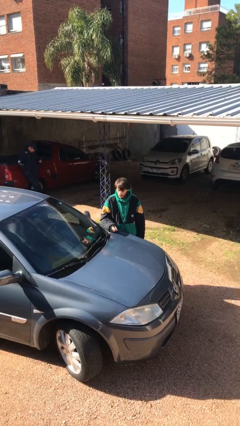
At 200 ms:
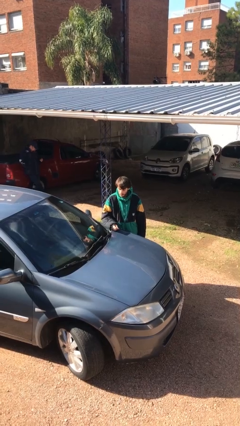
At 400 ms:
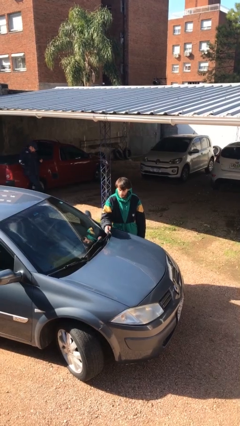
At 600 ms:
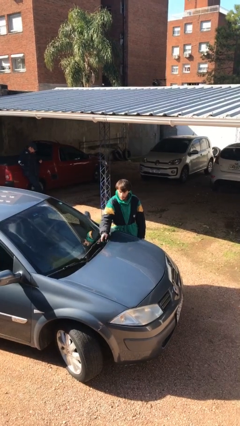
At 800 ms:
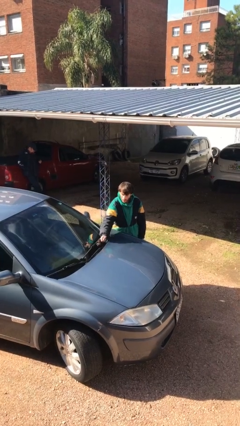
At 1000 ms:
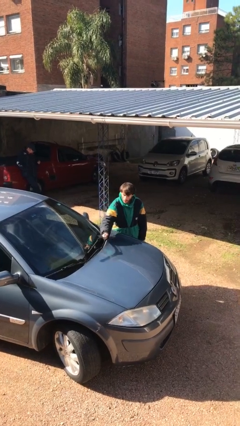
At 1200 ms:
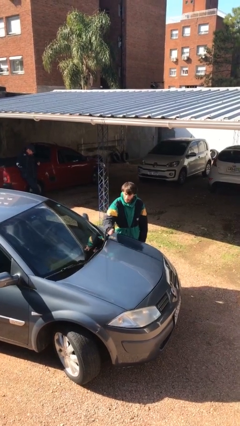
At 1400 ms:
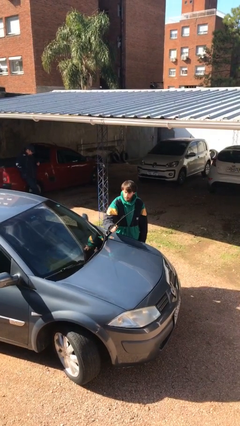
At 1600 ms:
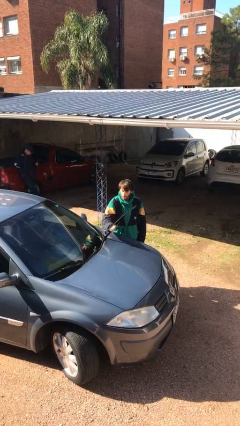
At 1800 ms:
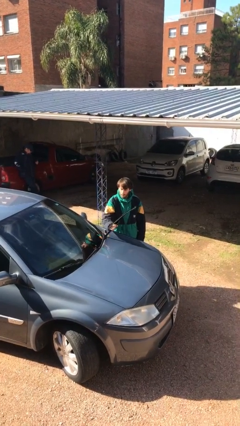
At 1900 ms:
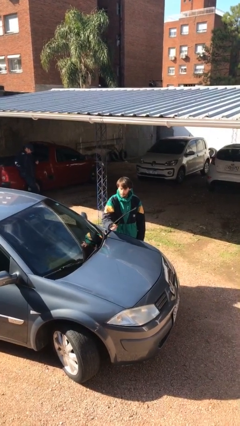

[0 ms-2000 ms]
person flips up car wipers

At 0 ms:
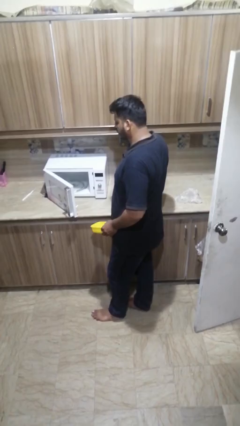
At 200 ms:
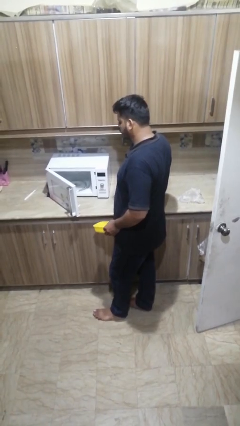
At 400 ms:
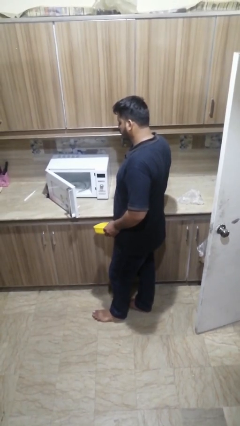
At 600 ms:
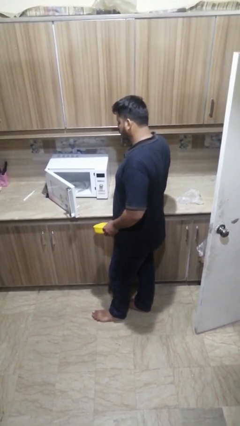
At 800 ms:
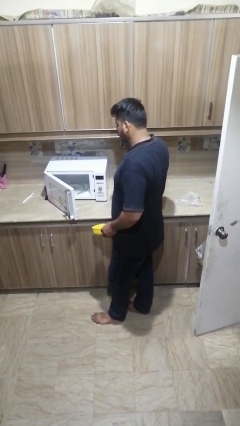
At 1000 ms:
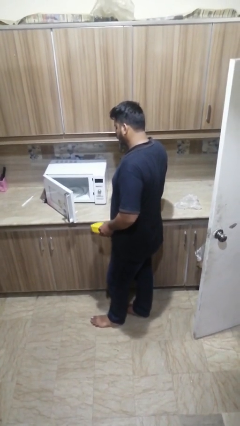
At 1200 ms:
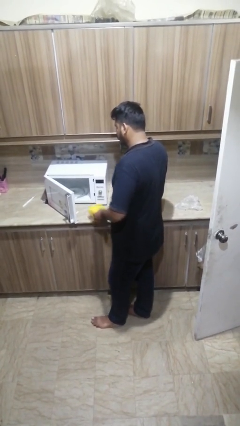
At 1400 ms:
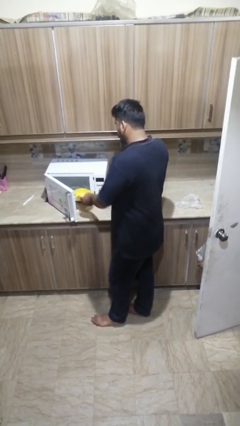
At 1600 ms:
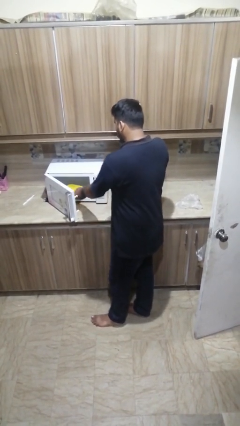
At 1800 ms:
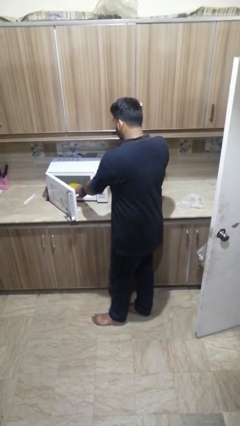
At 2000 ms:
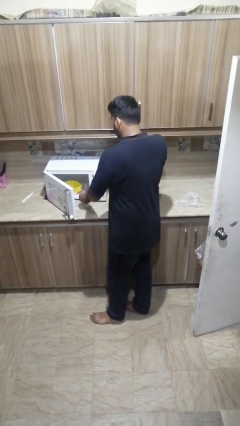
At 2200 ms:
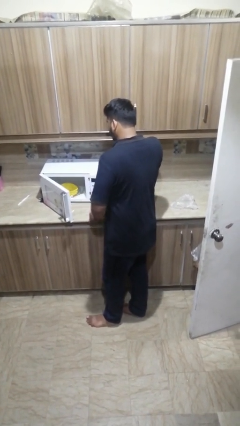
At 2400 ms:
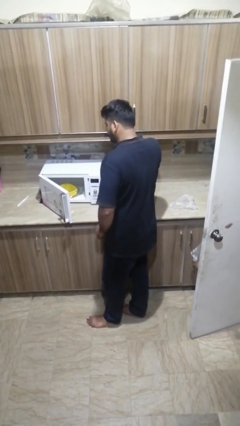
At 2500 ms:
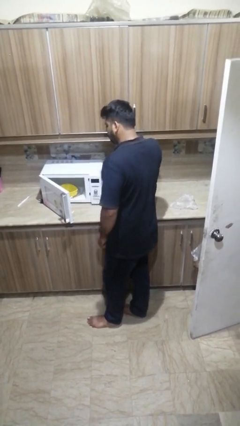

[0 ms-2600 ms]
person puts object into microwave

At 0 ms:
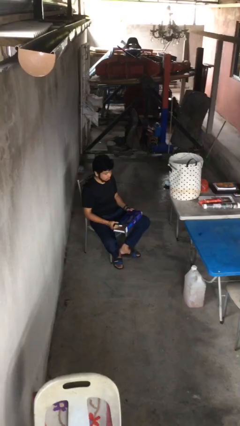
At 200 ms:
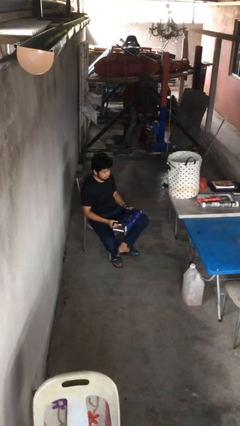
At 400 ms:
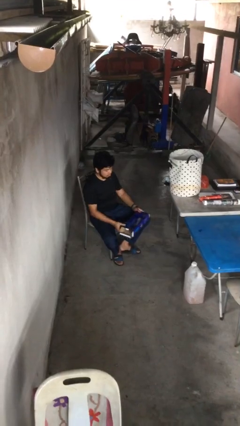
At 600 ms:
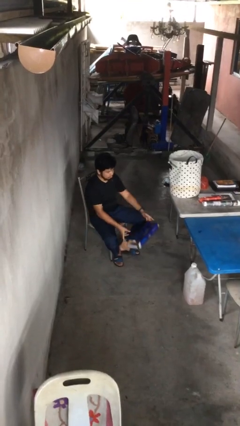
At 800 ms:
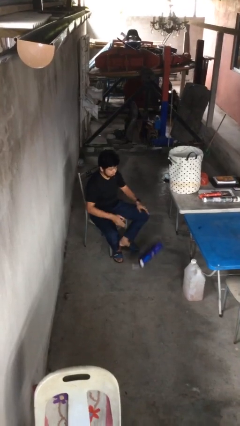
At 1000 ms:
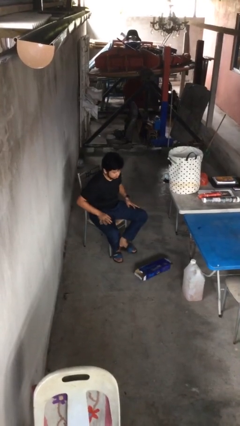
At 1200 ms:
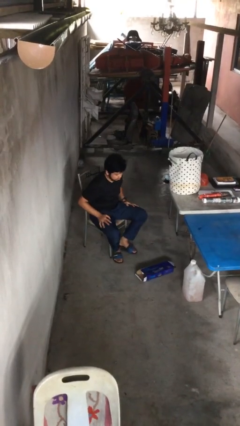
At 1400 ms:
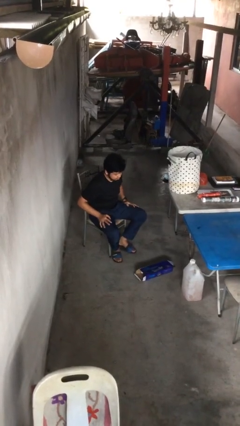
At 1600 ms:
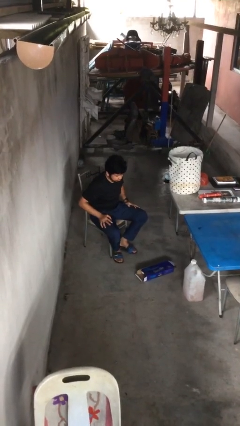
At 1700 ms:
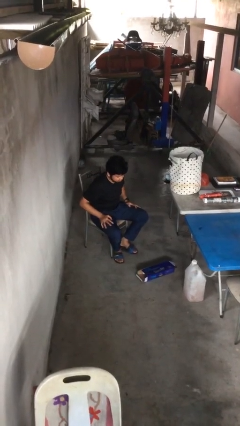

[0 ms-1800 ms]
person drops object

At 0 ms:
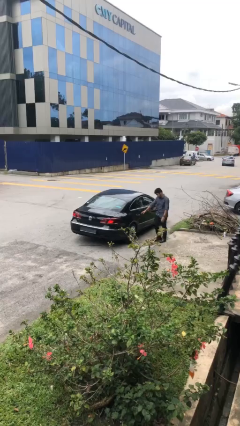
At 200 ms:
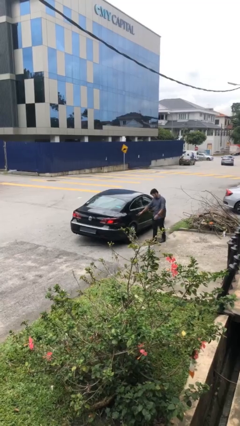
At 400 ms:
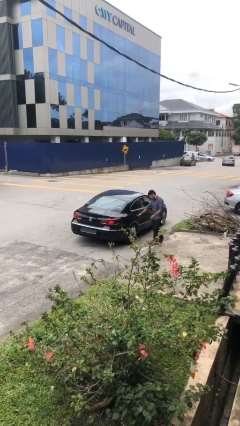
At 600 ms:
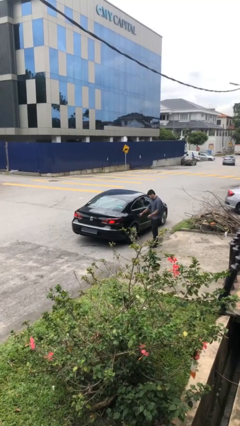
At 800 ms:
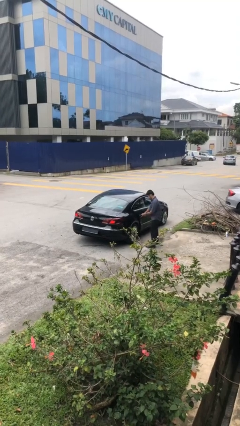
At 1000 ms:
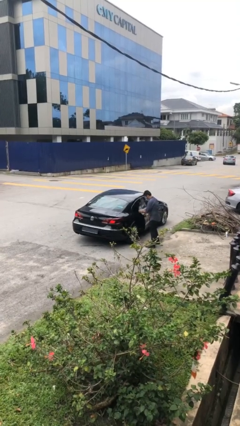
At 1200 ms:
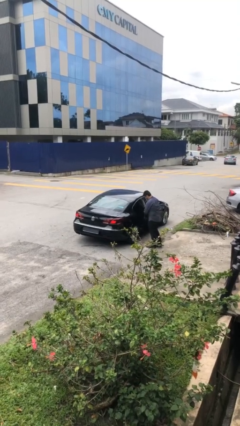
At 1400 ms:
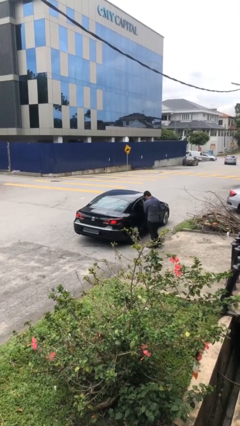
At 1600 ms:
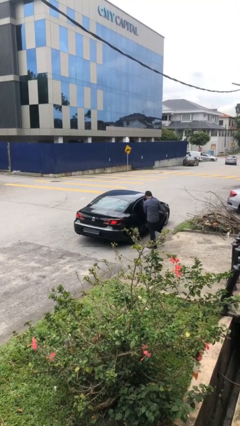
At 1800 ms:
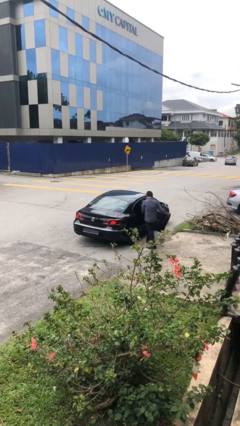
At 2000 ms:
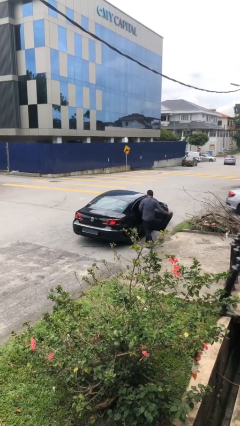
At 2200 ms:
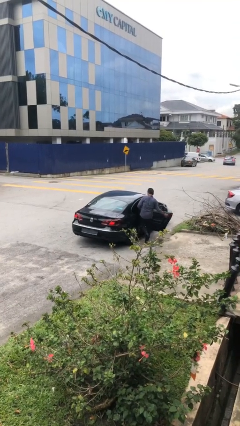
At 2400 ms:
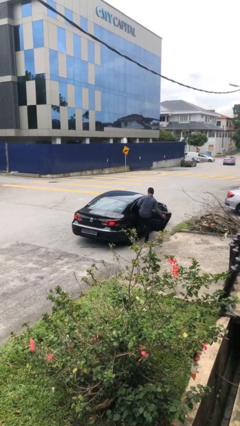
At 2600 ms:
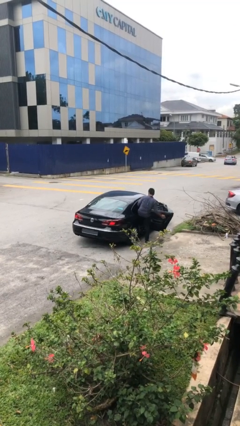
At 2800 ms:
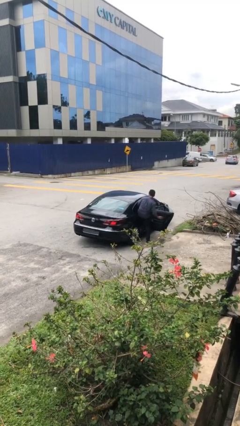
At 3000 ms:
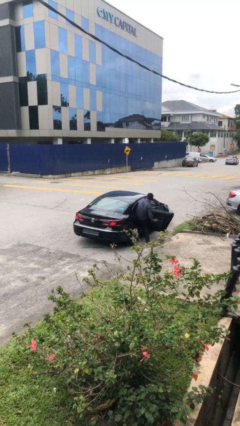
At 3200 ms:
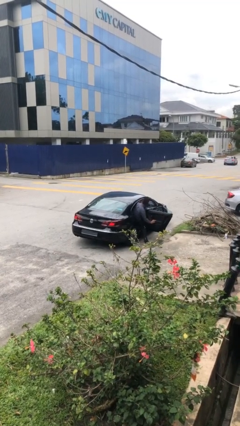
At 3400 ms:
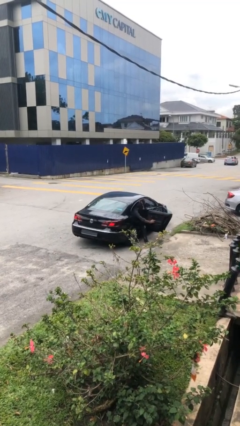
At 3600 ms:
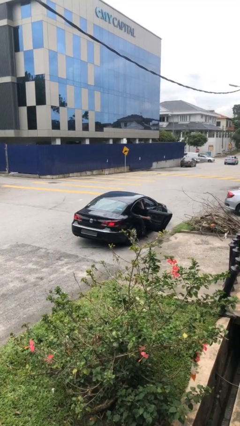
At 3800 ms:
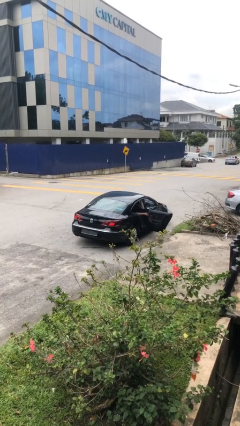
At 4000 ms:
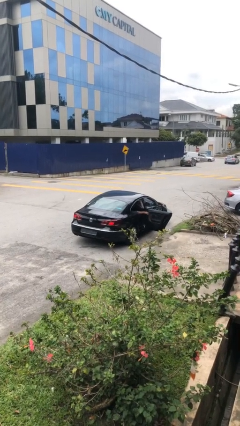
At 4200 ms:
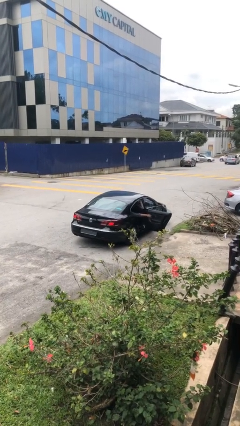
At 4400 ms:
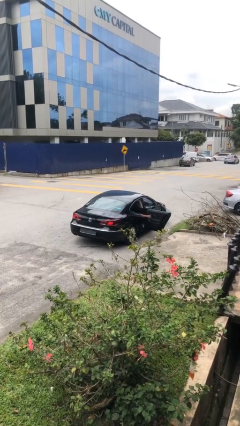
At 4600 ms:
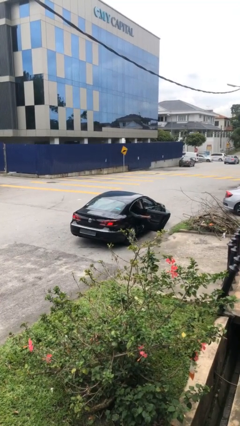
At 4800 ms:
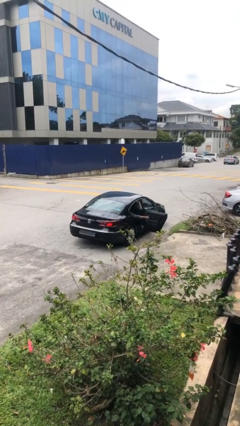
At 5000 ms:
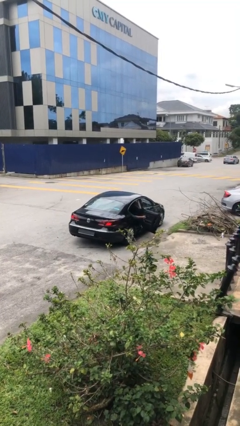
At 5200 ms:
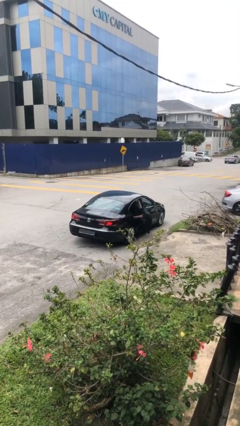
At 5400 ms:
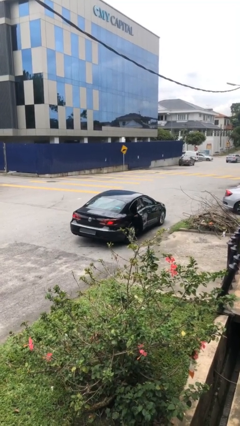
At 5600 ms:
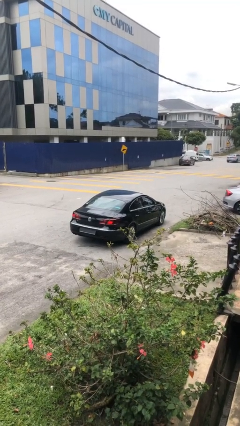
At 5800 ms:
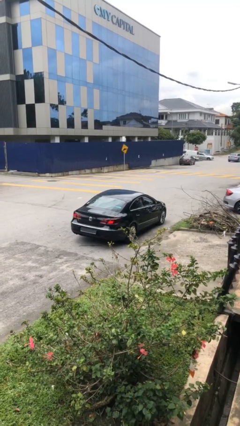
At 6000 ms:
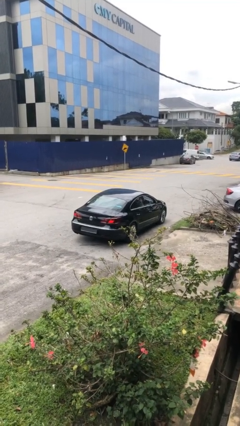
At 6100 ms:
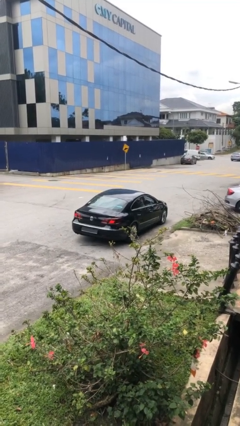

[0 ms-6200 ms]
car picks up person

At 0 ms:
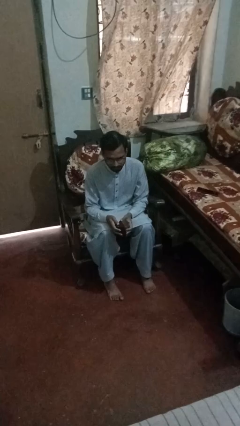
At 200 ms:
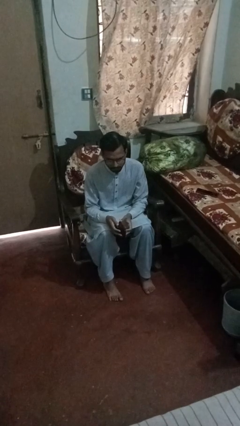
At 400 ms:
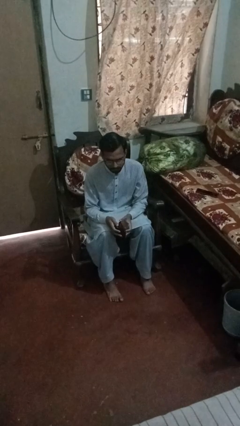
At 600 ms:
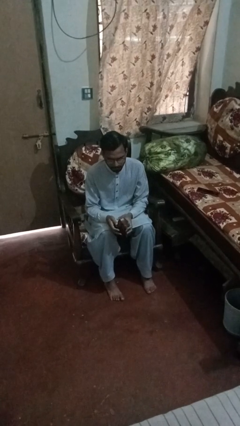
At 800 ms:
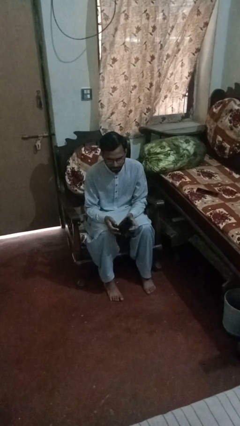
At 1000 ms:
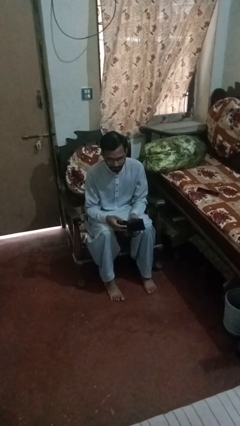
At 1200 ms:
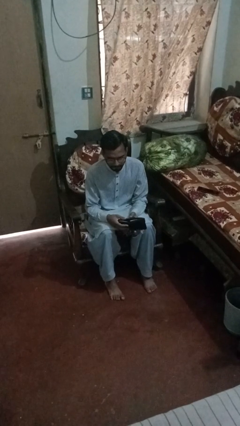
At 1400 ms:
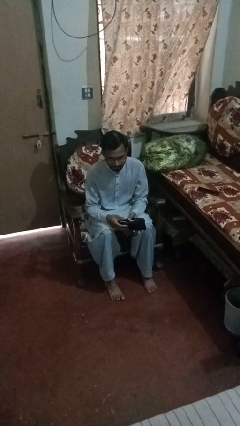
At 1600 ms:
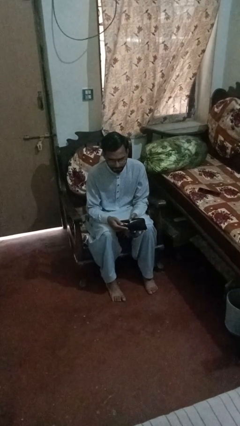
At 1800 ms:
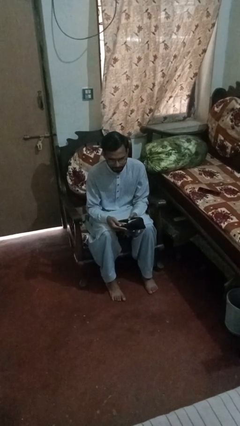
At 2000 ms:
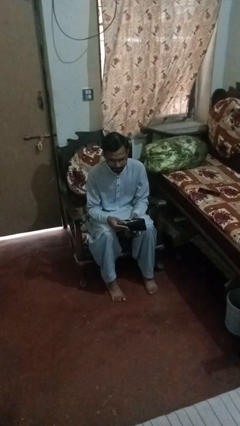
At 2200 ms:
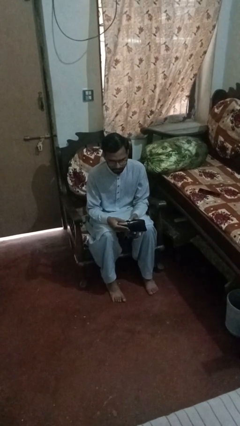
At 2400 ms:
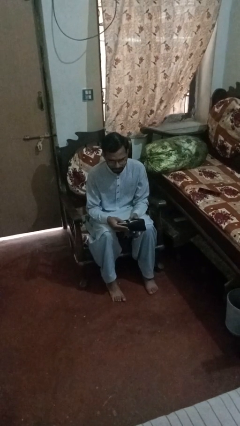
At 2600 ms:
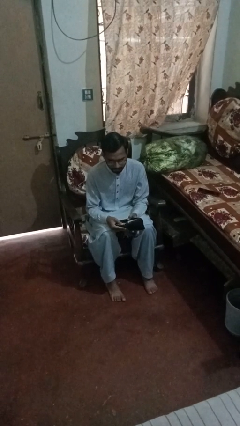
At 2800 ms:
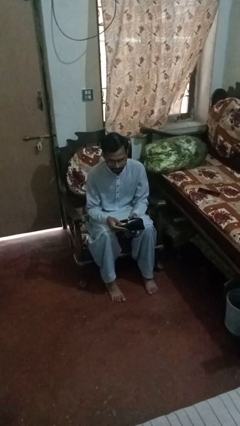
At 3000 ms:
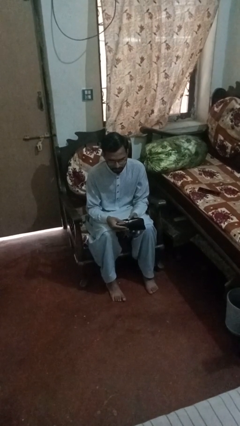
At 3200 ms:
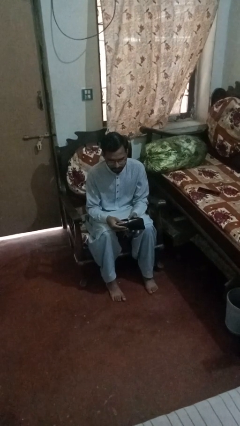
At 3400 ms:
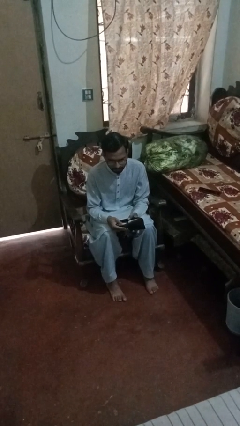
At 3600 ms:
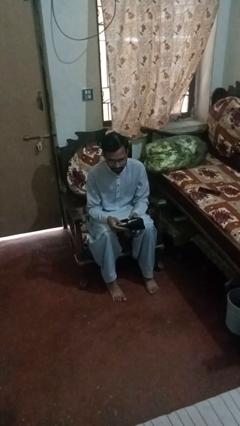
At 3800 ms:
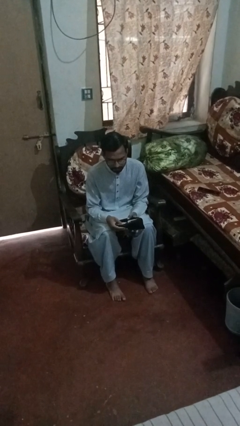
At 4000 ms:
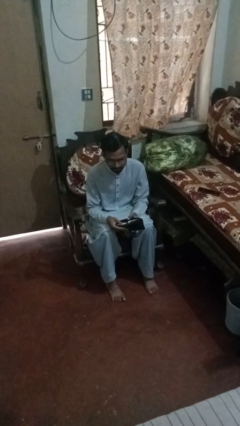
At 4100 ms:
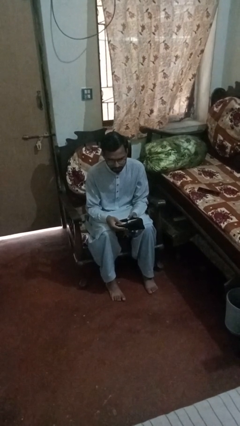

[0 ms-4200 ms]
person searches in purse

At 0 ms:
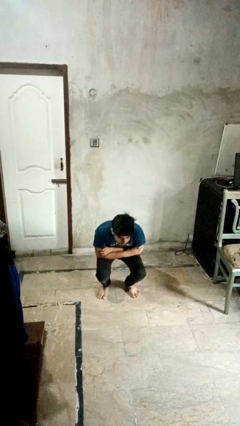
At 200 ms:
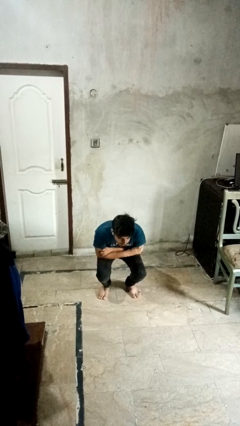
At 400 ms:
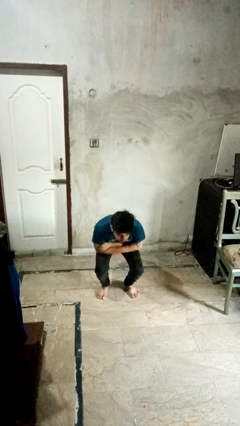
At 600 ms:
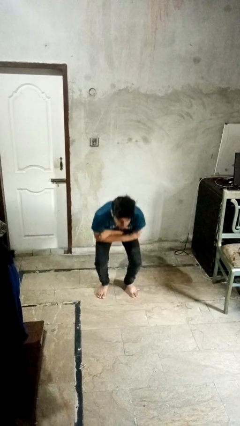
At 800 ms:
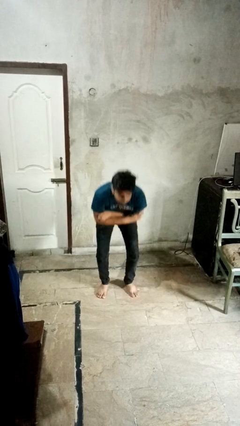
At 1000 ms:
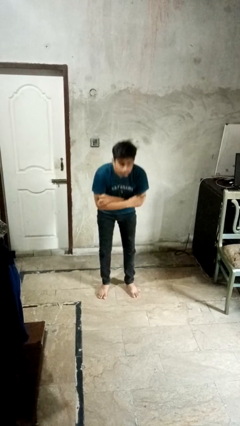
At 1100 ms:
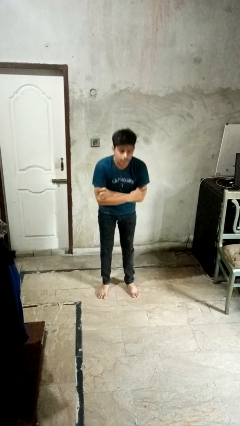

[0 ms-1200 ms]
person stands up
